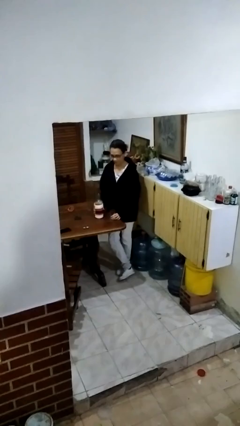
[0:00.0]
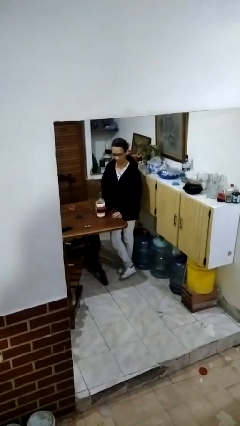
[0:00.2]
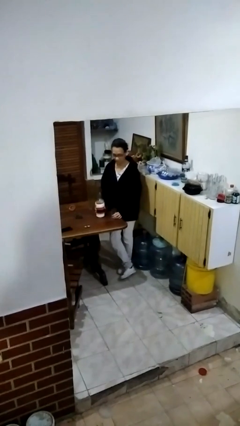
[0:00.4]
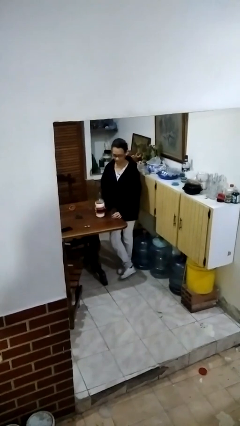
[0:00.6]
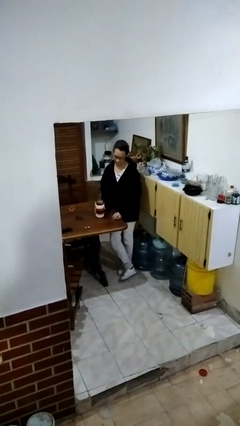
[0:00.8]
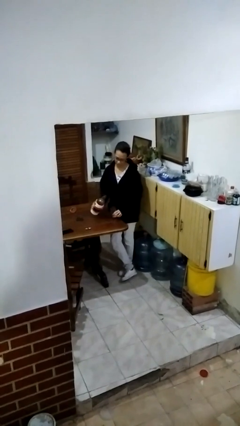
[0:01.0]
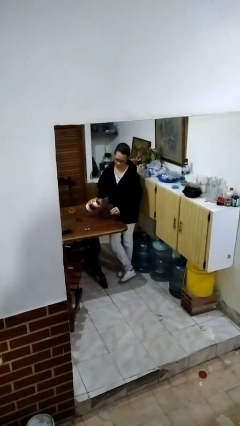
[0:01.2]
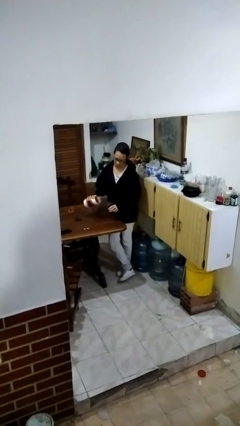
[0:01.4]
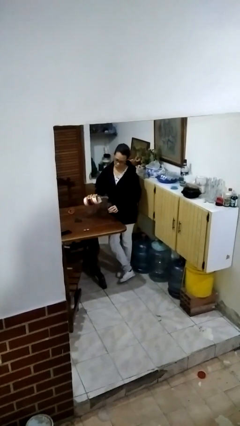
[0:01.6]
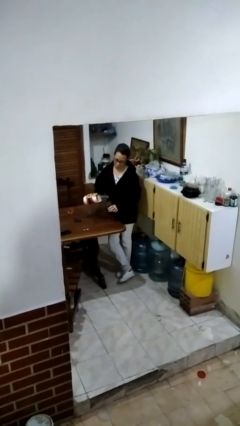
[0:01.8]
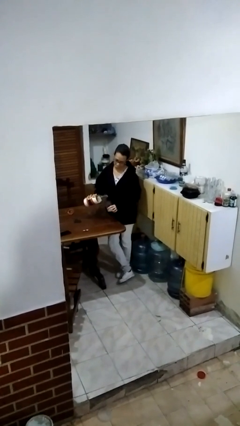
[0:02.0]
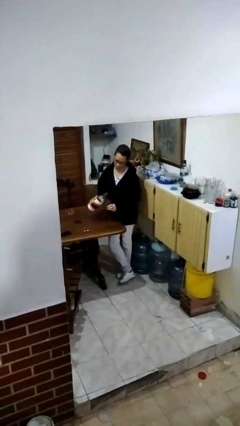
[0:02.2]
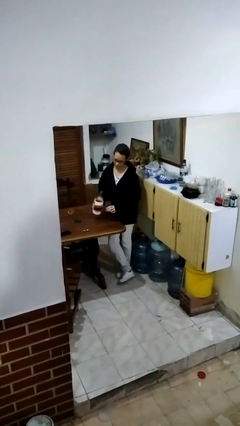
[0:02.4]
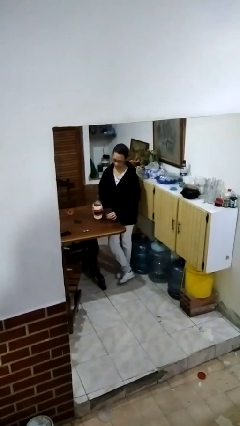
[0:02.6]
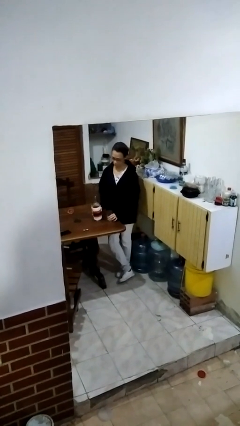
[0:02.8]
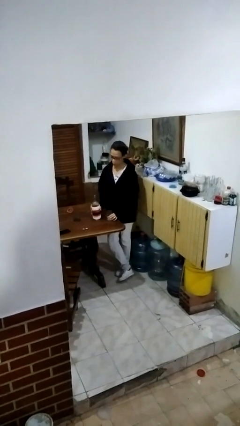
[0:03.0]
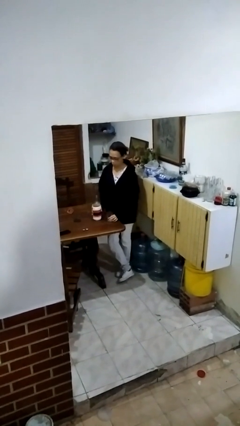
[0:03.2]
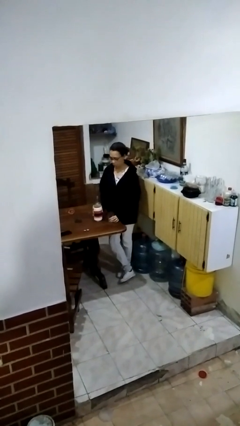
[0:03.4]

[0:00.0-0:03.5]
person pours liquid into cup

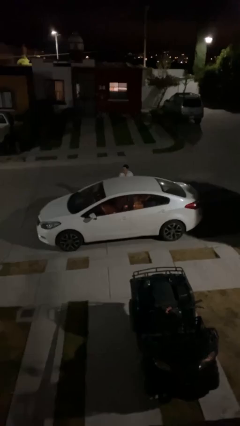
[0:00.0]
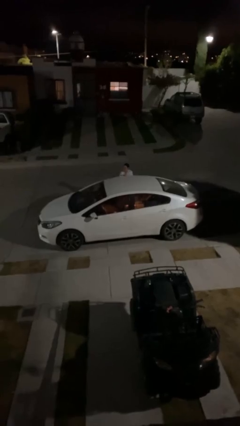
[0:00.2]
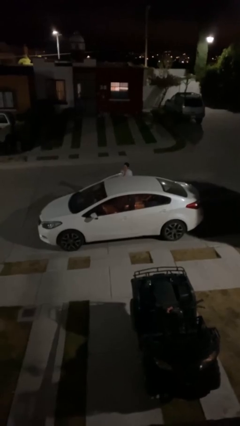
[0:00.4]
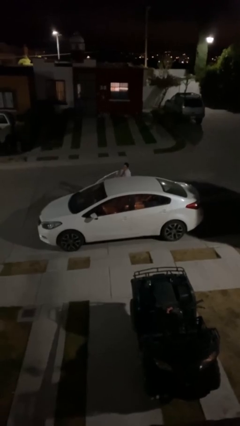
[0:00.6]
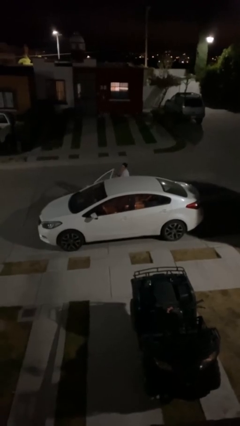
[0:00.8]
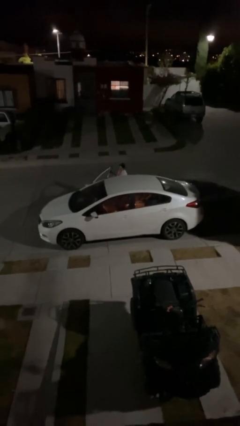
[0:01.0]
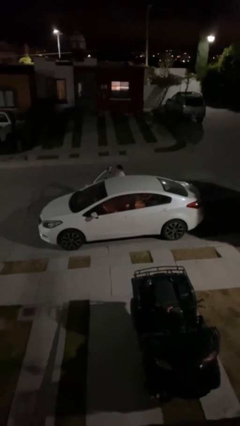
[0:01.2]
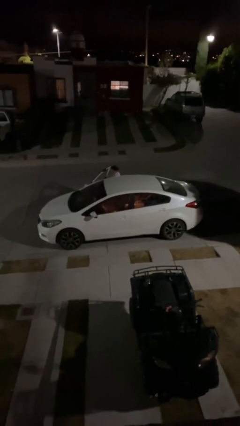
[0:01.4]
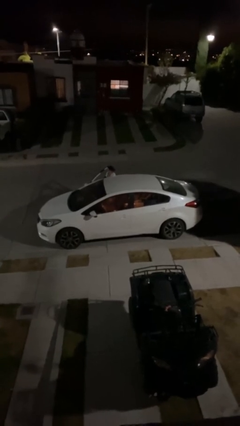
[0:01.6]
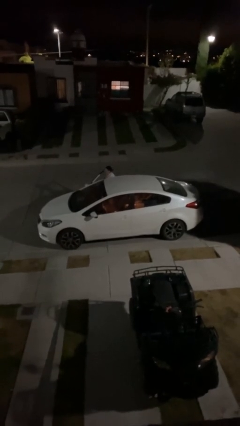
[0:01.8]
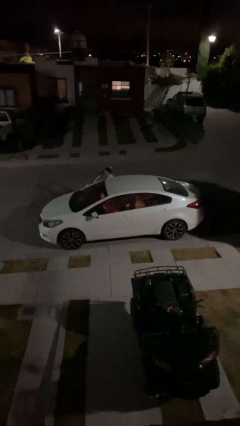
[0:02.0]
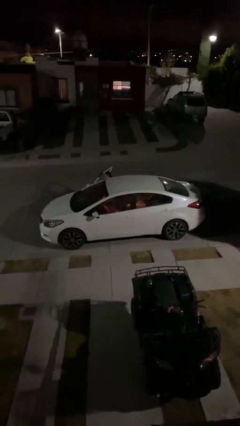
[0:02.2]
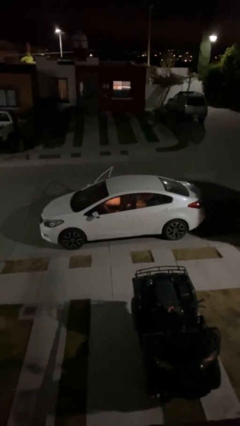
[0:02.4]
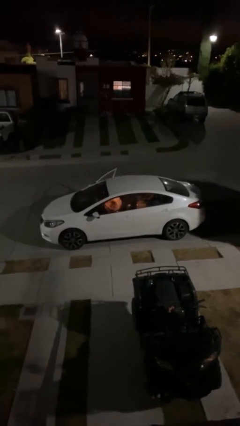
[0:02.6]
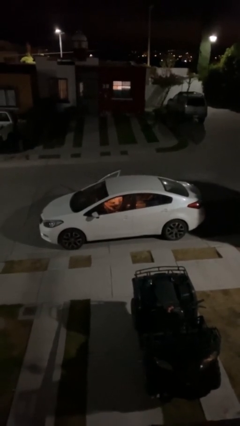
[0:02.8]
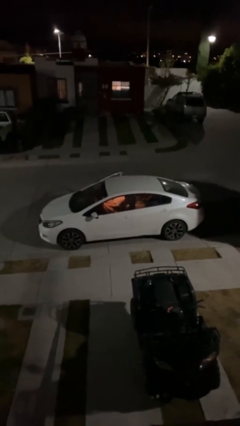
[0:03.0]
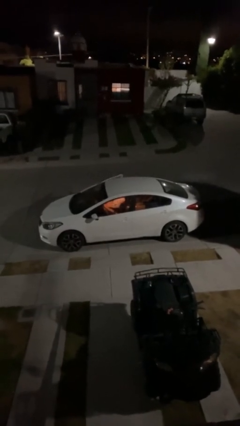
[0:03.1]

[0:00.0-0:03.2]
car picks up person

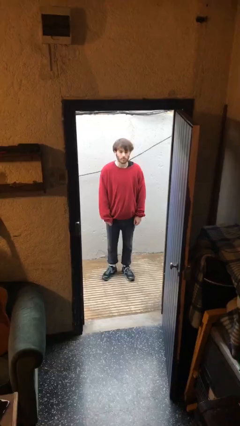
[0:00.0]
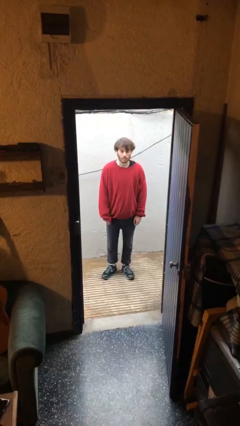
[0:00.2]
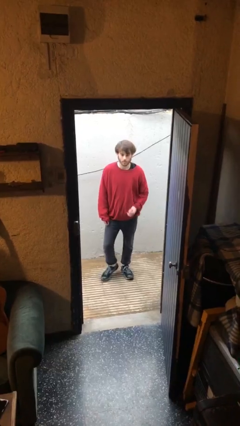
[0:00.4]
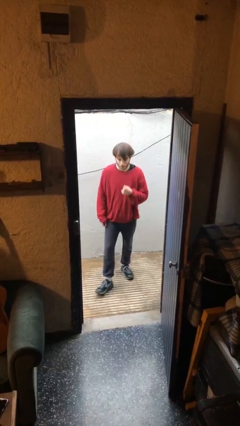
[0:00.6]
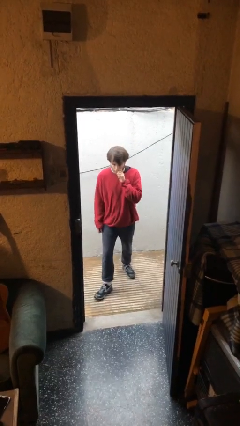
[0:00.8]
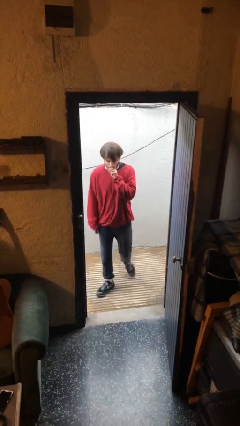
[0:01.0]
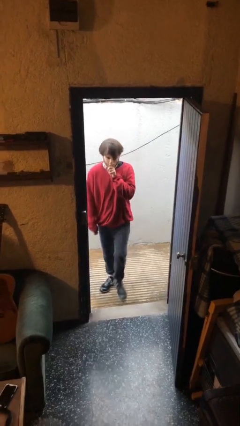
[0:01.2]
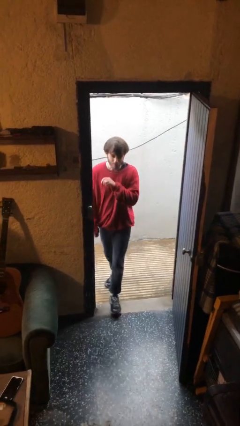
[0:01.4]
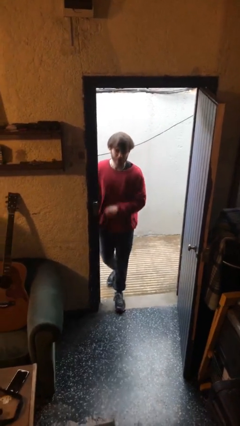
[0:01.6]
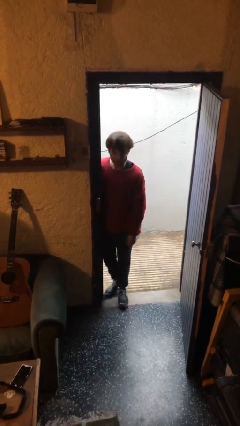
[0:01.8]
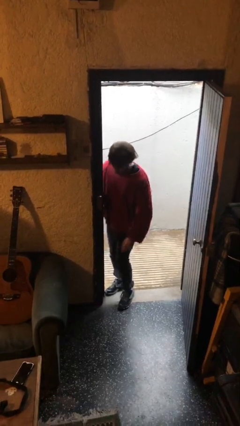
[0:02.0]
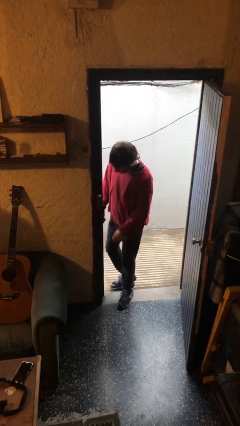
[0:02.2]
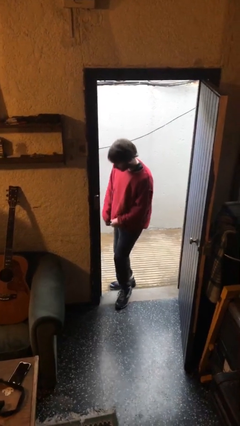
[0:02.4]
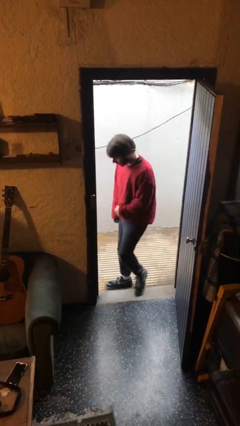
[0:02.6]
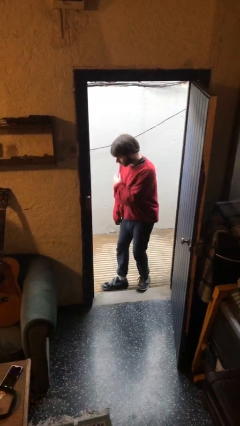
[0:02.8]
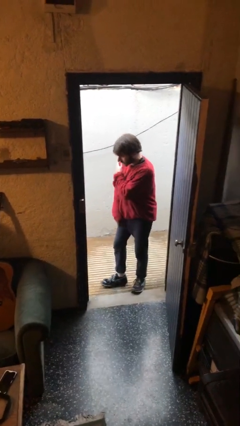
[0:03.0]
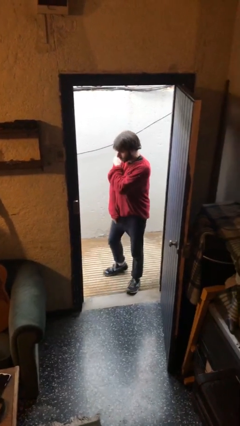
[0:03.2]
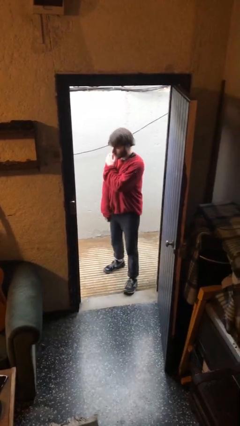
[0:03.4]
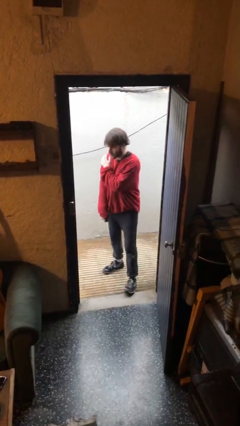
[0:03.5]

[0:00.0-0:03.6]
person bumps into wall

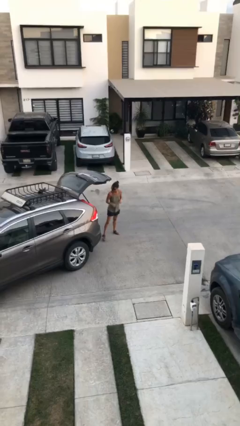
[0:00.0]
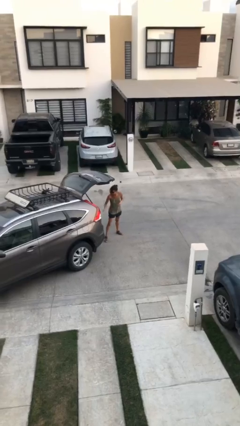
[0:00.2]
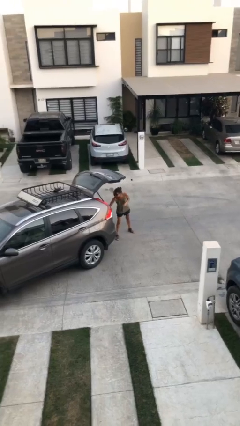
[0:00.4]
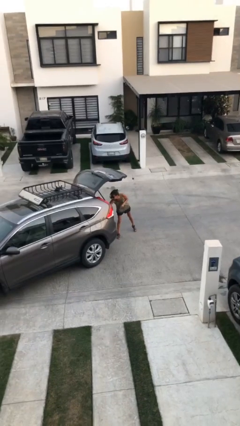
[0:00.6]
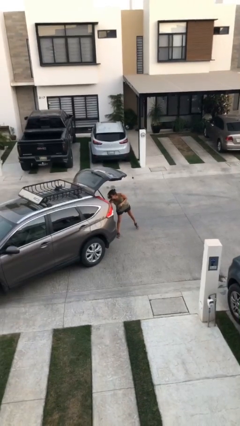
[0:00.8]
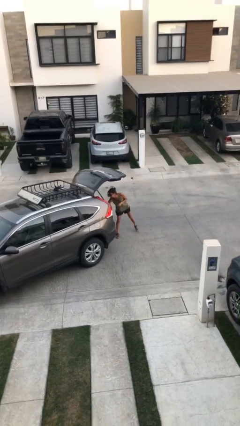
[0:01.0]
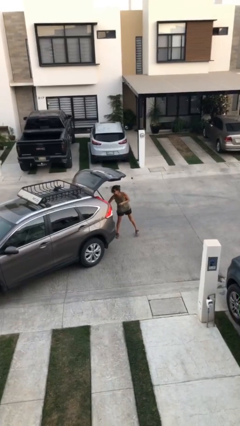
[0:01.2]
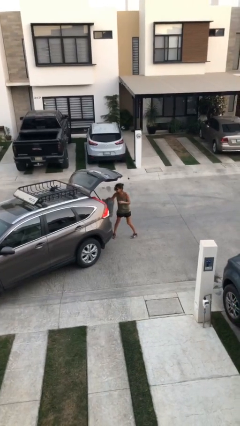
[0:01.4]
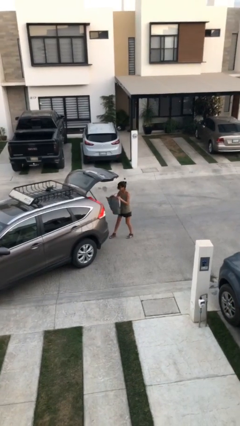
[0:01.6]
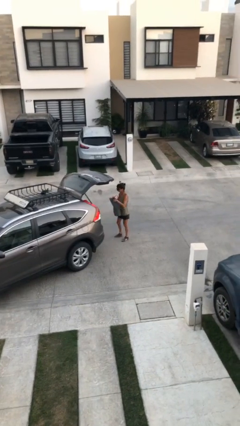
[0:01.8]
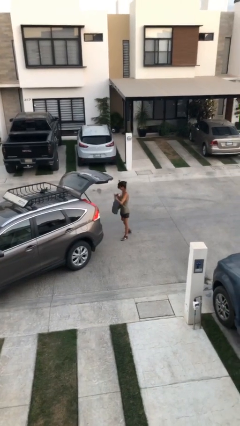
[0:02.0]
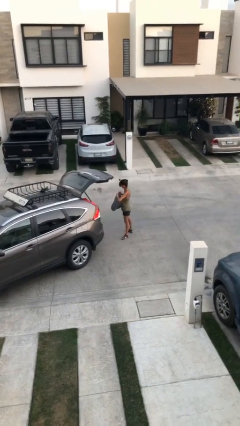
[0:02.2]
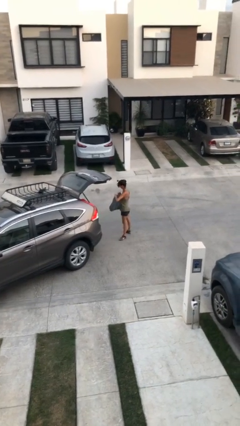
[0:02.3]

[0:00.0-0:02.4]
person unloads car

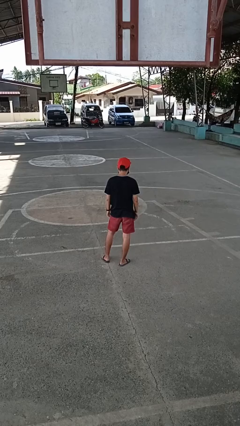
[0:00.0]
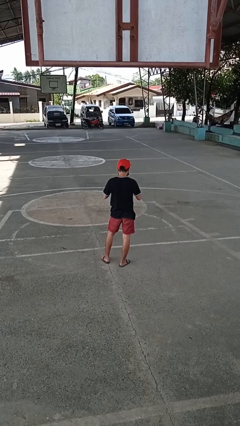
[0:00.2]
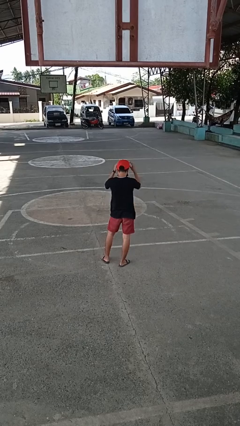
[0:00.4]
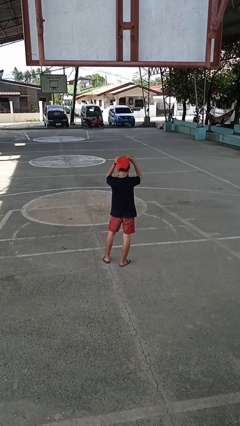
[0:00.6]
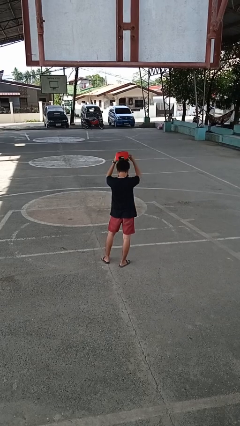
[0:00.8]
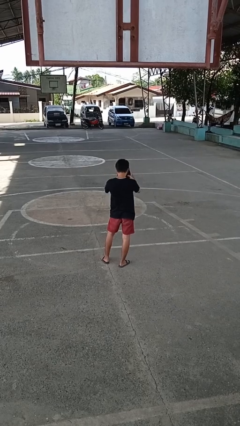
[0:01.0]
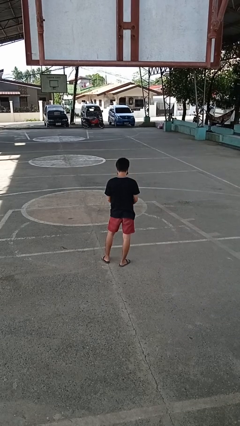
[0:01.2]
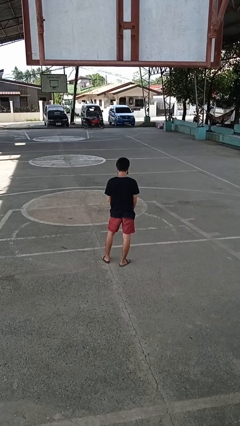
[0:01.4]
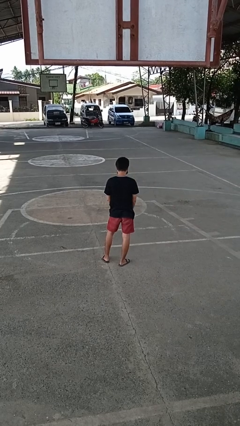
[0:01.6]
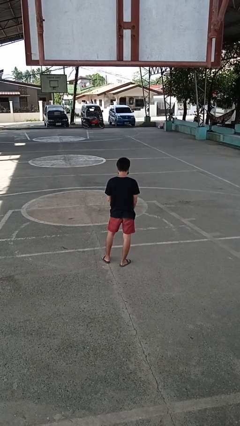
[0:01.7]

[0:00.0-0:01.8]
person takes off hat

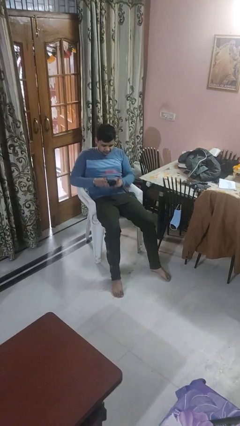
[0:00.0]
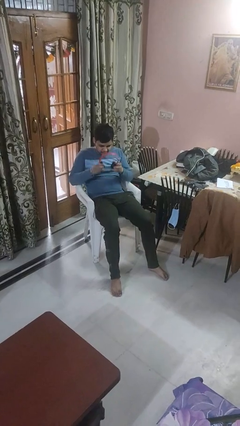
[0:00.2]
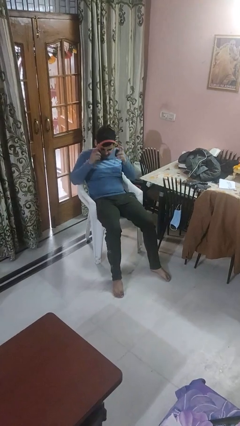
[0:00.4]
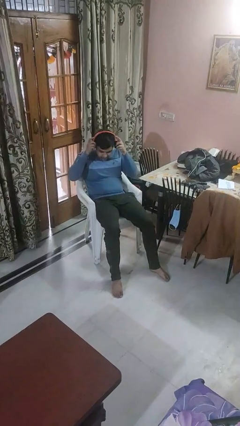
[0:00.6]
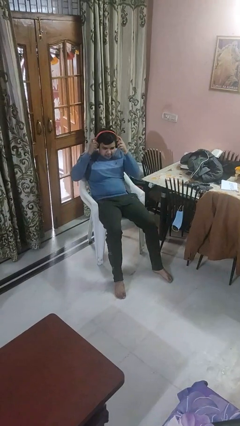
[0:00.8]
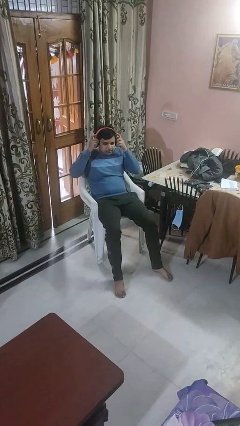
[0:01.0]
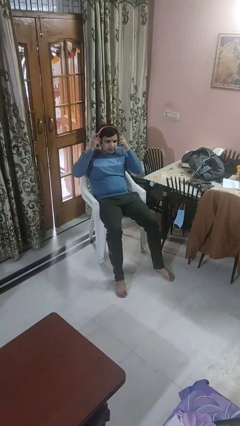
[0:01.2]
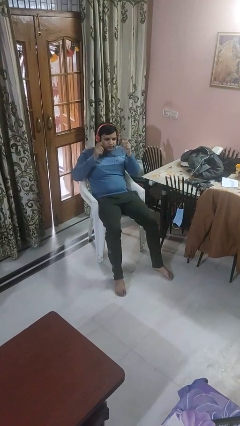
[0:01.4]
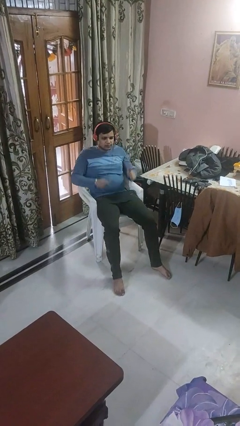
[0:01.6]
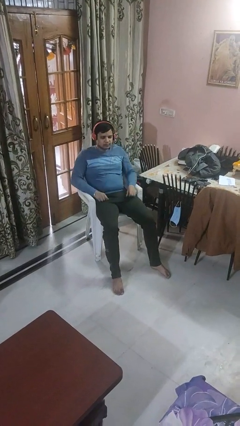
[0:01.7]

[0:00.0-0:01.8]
person puts on headphones

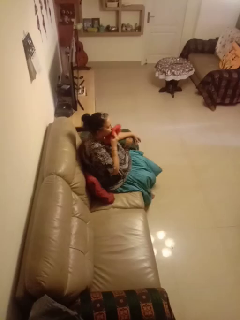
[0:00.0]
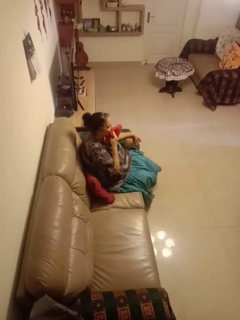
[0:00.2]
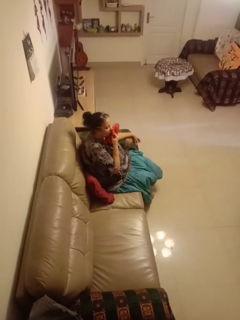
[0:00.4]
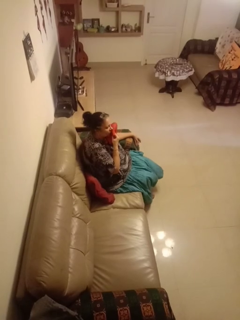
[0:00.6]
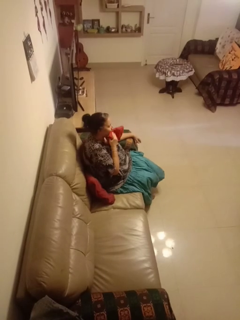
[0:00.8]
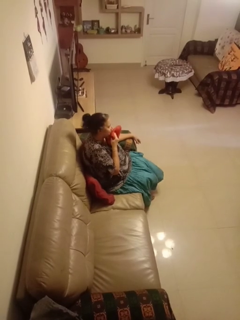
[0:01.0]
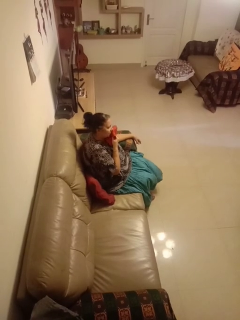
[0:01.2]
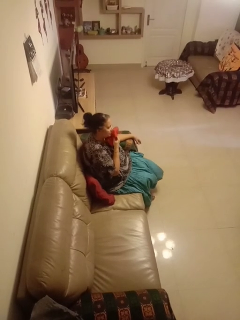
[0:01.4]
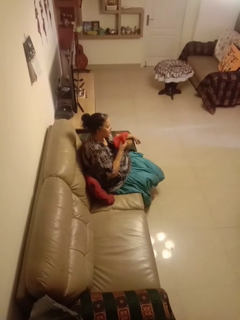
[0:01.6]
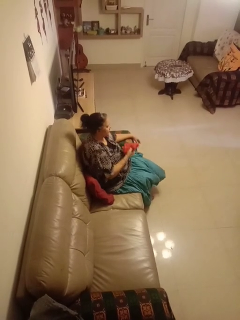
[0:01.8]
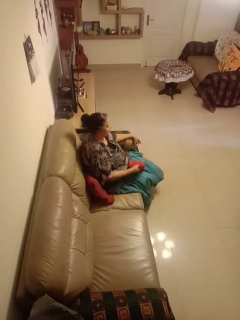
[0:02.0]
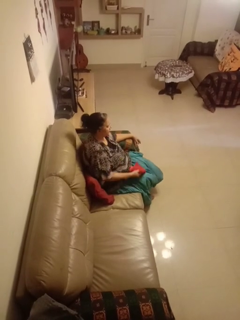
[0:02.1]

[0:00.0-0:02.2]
person wipes mouth with napkin
